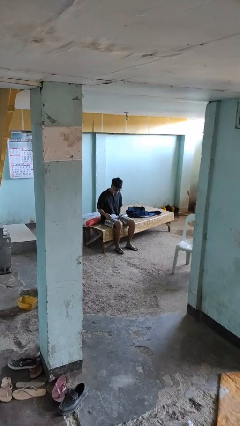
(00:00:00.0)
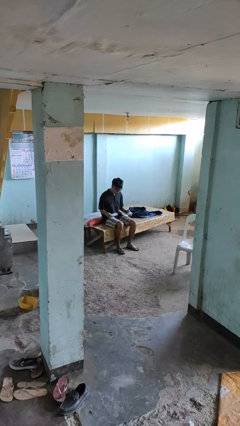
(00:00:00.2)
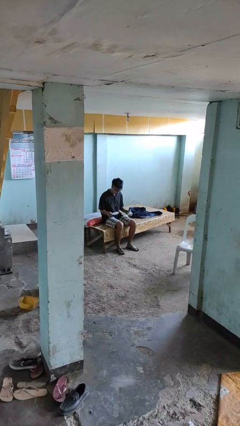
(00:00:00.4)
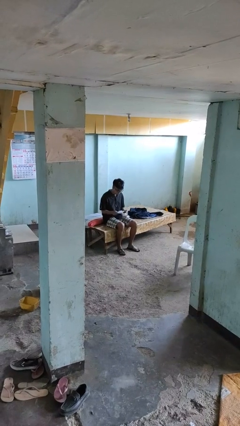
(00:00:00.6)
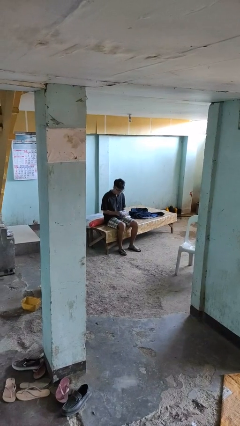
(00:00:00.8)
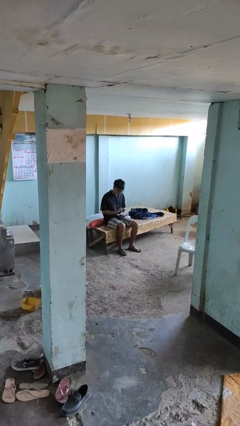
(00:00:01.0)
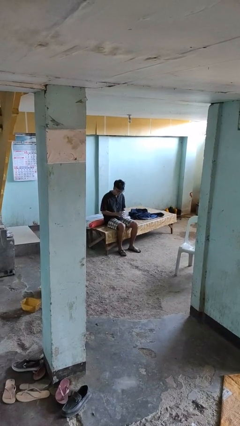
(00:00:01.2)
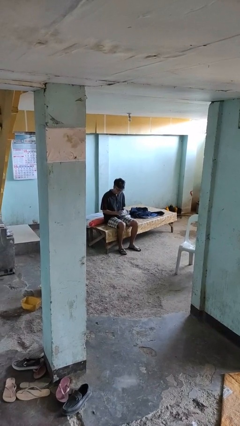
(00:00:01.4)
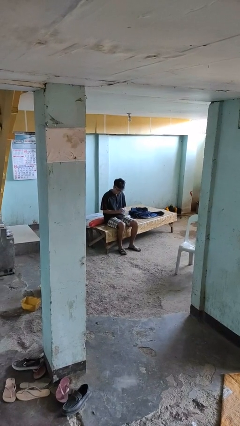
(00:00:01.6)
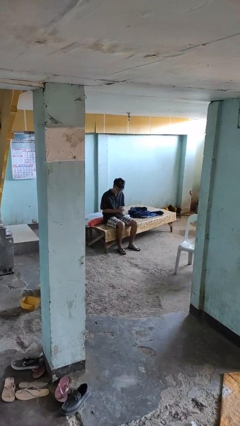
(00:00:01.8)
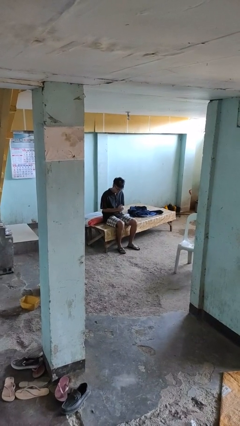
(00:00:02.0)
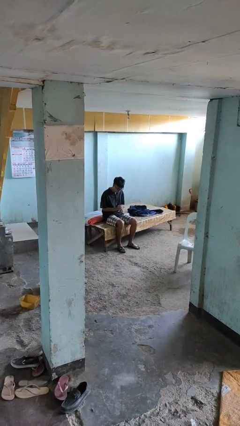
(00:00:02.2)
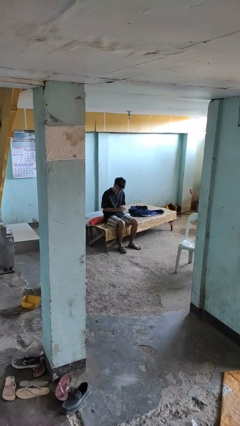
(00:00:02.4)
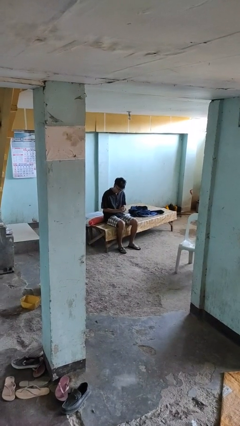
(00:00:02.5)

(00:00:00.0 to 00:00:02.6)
person crumples paper

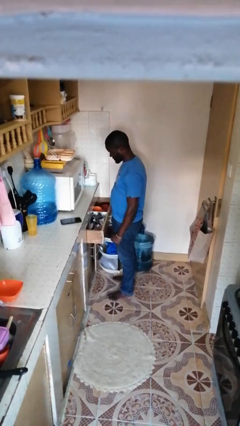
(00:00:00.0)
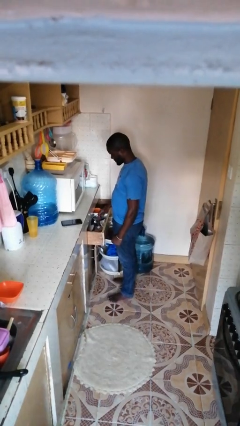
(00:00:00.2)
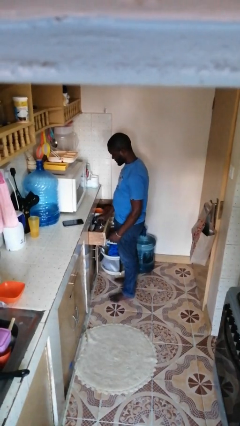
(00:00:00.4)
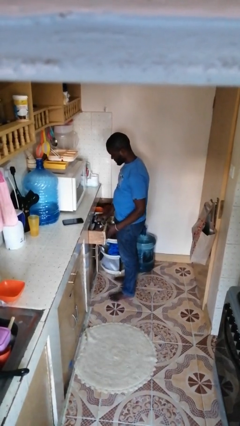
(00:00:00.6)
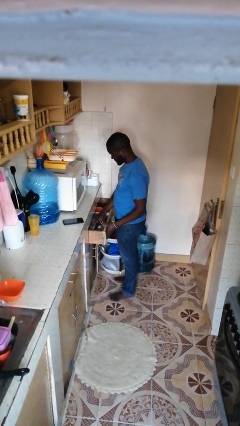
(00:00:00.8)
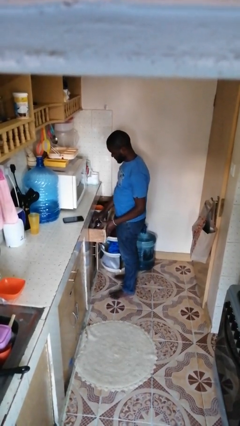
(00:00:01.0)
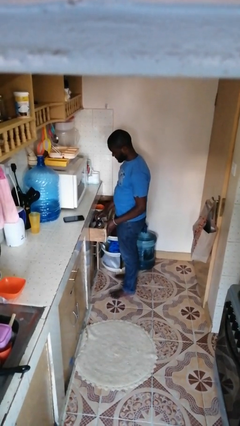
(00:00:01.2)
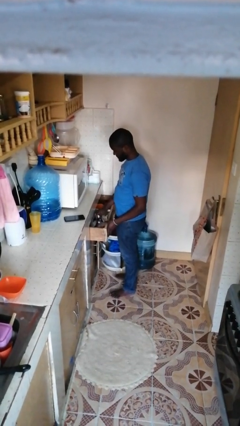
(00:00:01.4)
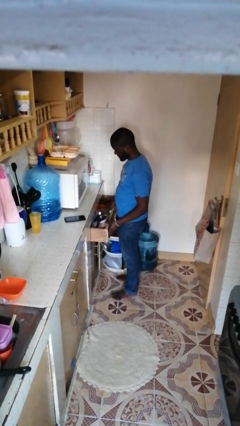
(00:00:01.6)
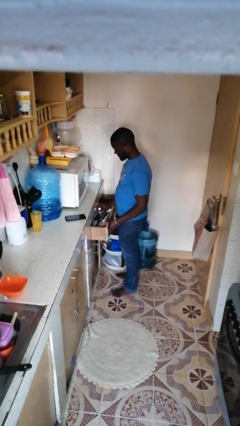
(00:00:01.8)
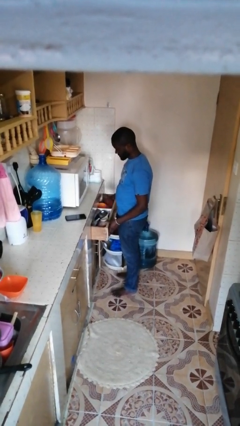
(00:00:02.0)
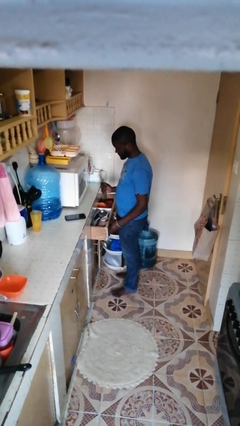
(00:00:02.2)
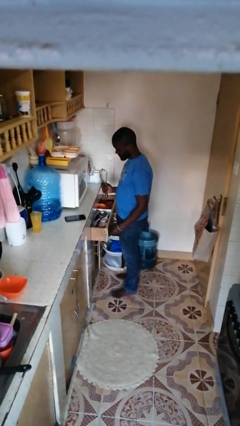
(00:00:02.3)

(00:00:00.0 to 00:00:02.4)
person takes object from kitchen drawer

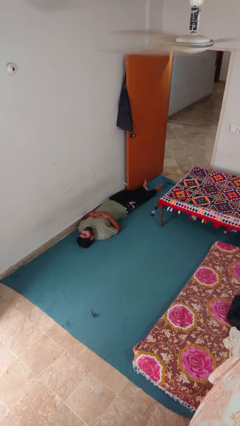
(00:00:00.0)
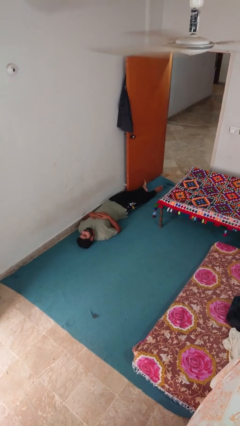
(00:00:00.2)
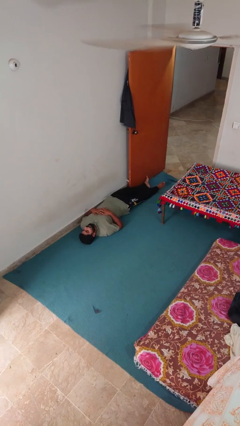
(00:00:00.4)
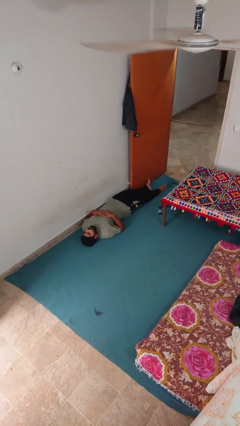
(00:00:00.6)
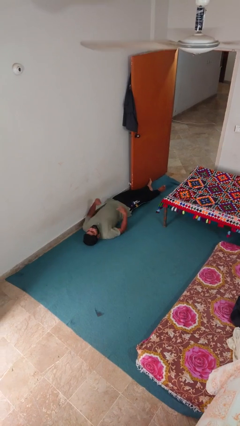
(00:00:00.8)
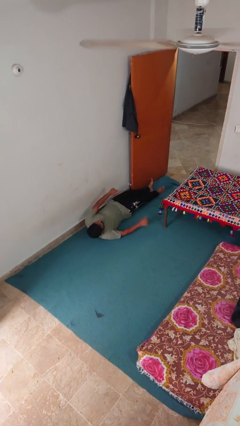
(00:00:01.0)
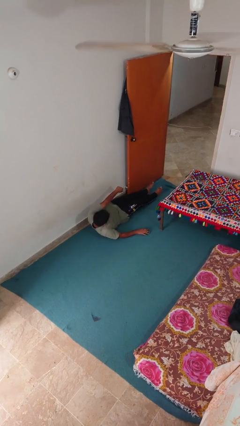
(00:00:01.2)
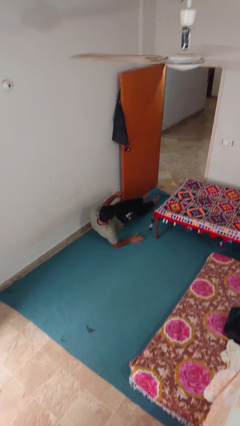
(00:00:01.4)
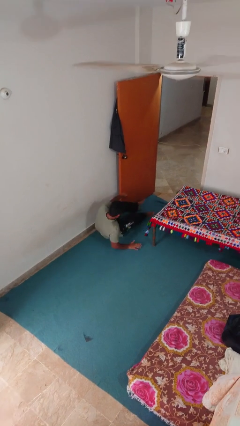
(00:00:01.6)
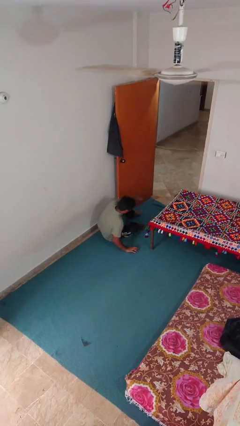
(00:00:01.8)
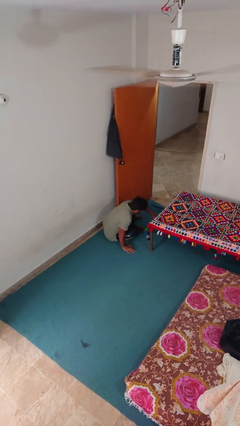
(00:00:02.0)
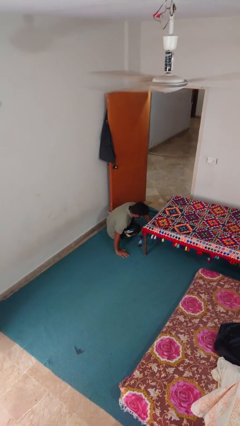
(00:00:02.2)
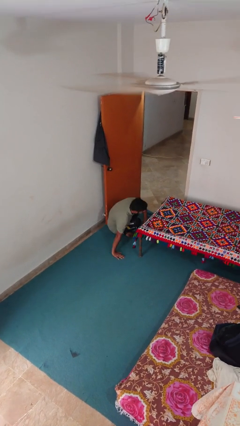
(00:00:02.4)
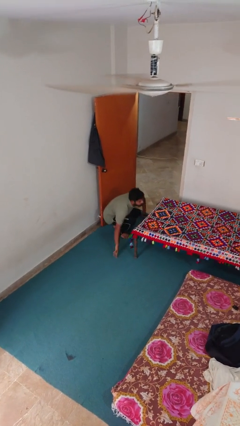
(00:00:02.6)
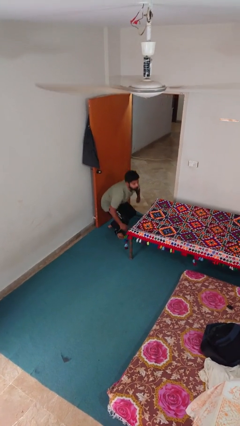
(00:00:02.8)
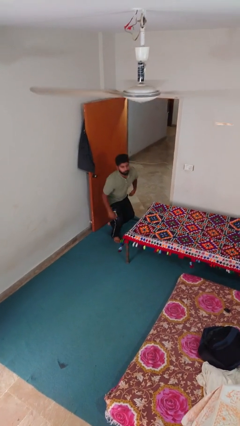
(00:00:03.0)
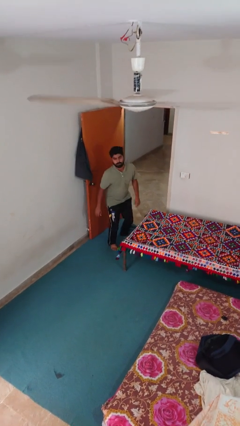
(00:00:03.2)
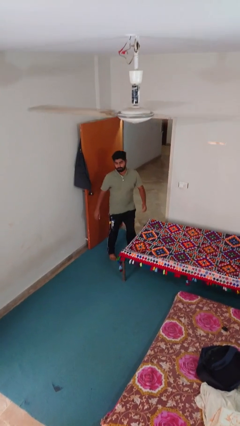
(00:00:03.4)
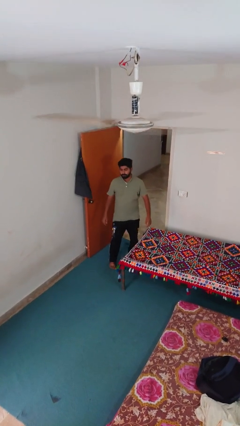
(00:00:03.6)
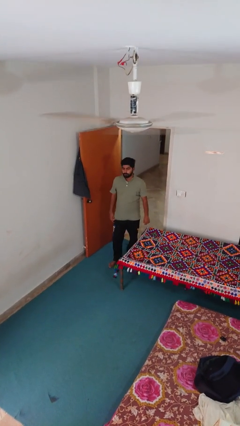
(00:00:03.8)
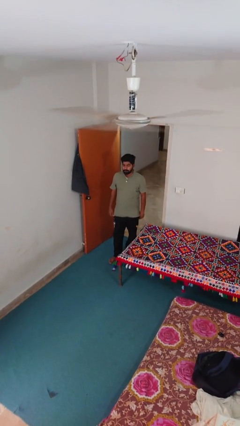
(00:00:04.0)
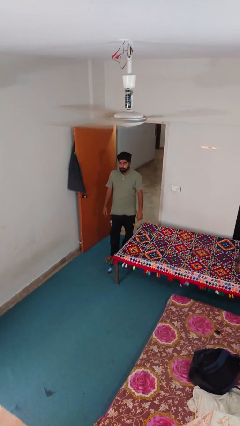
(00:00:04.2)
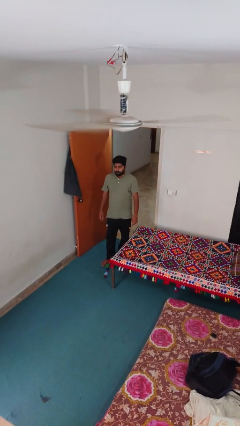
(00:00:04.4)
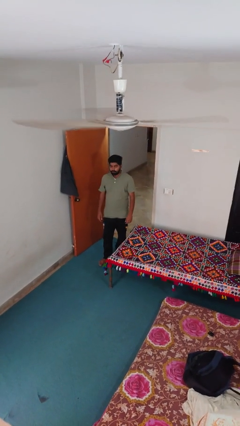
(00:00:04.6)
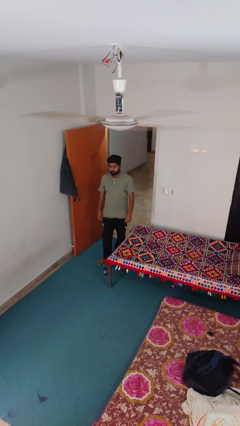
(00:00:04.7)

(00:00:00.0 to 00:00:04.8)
person stands up from floor

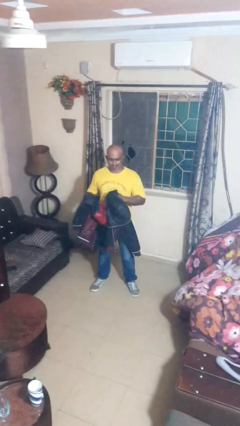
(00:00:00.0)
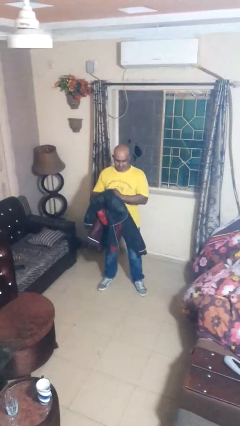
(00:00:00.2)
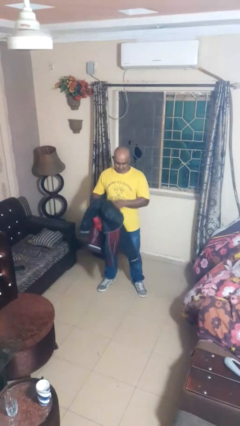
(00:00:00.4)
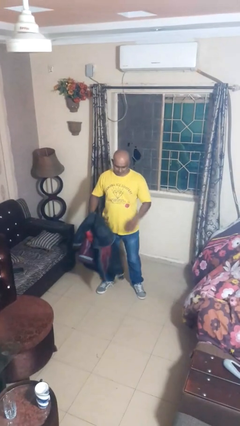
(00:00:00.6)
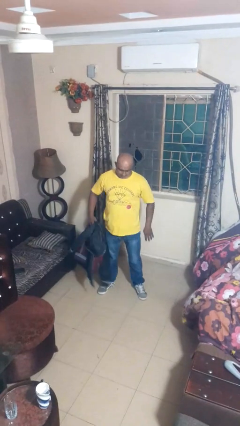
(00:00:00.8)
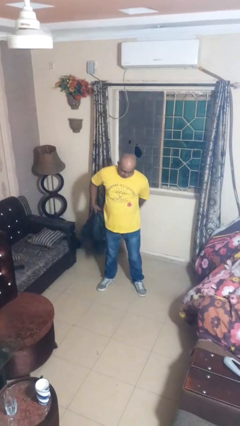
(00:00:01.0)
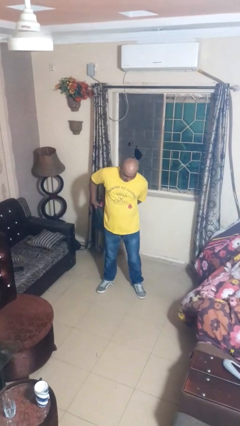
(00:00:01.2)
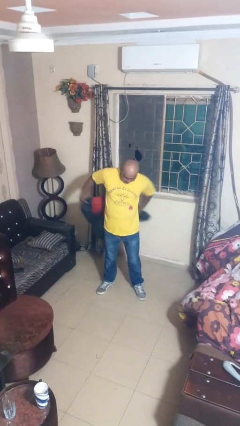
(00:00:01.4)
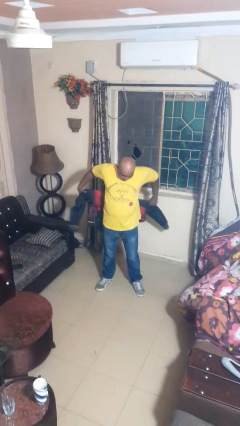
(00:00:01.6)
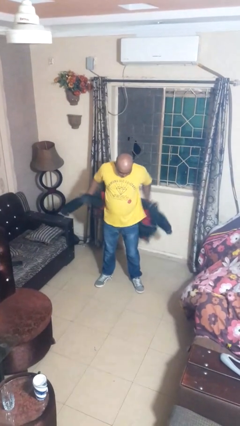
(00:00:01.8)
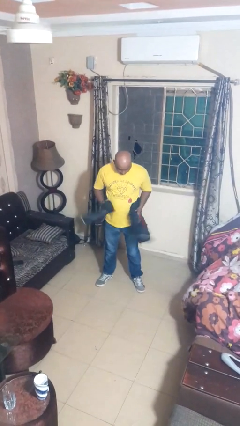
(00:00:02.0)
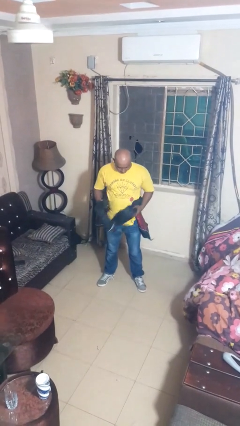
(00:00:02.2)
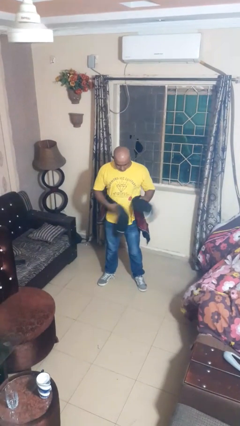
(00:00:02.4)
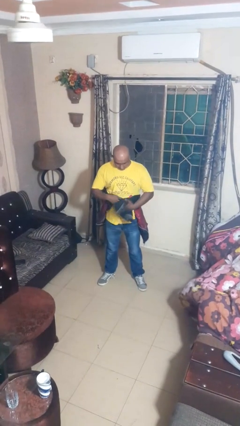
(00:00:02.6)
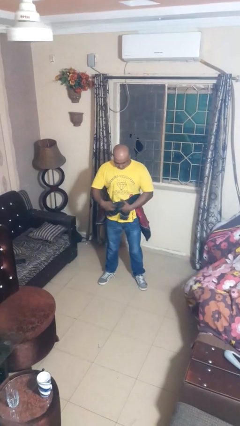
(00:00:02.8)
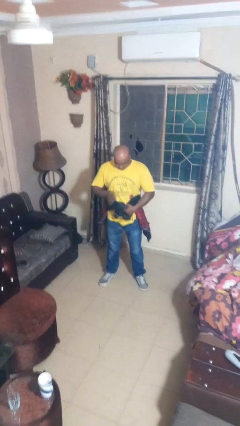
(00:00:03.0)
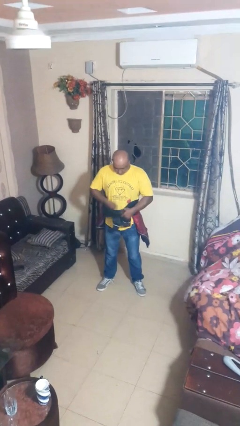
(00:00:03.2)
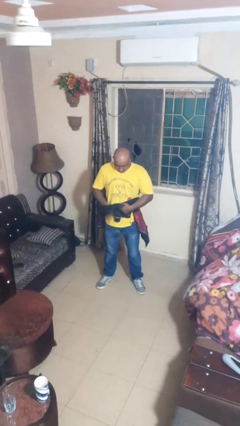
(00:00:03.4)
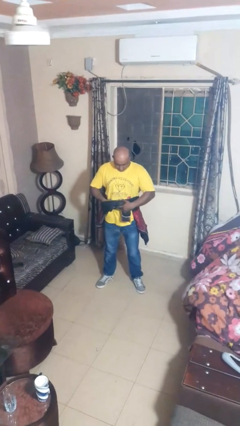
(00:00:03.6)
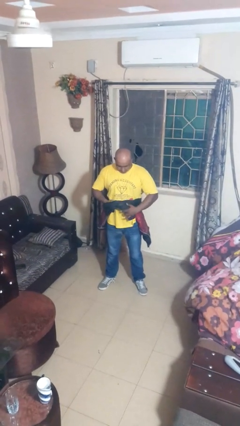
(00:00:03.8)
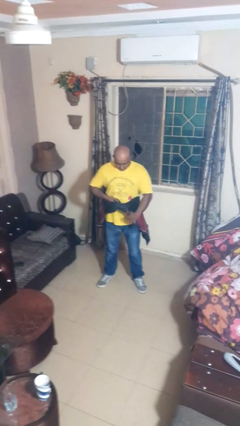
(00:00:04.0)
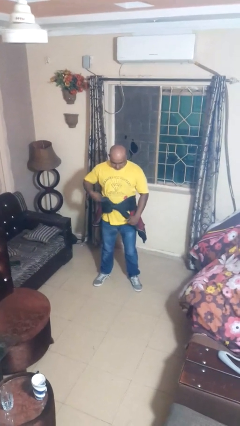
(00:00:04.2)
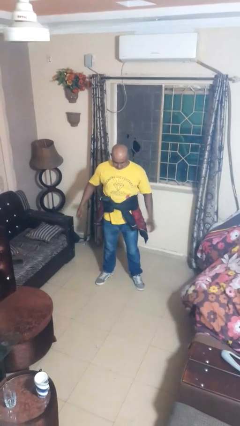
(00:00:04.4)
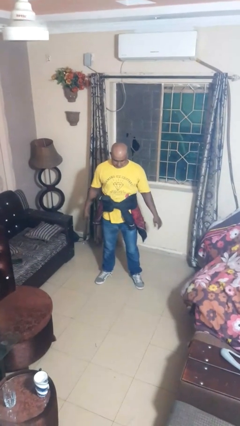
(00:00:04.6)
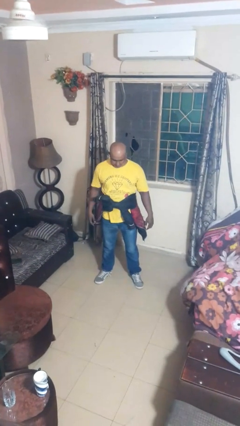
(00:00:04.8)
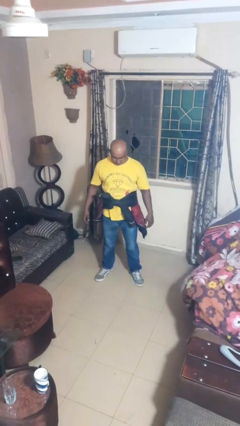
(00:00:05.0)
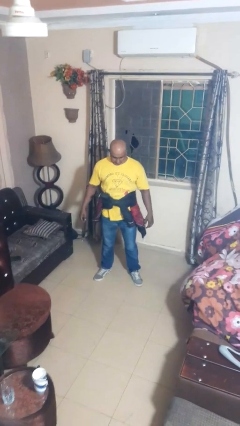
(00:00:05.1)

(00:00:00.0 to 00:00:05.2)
person ties jacket around waist

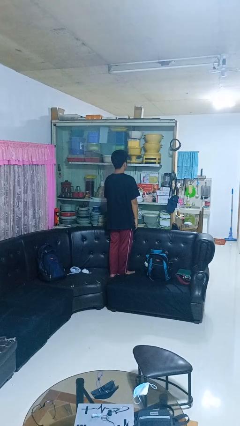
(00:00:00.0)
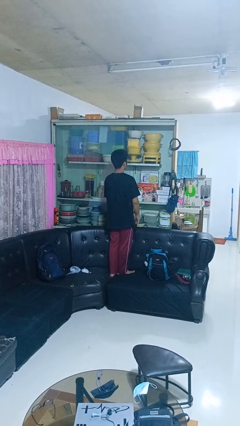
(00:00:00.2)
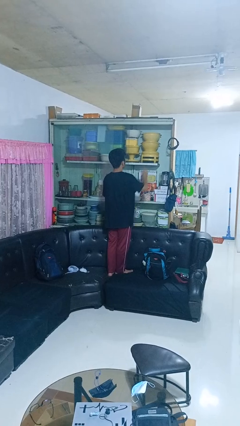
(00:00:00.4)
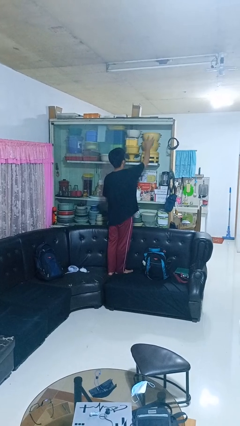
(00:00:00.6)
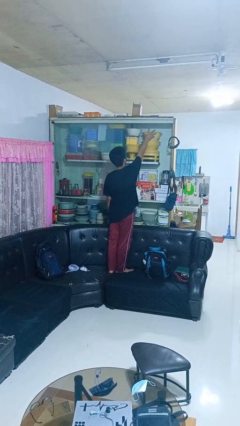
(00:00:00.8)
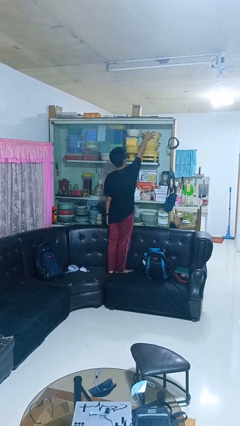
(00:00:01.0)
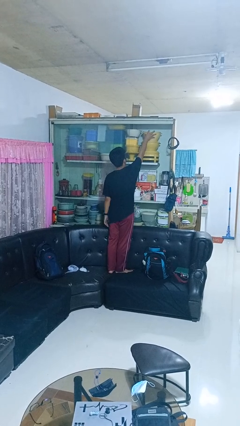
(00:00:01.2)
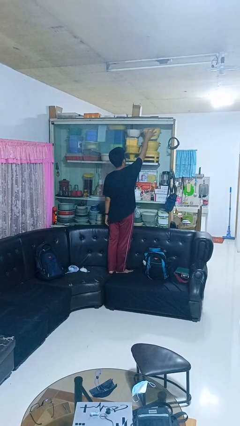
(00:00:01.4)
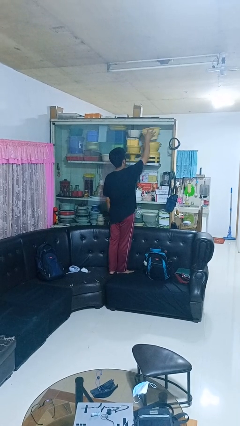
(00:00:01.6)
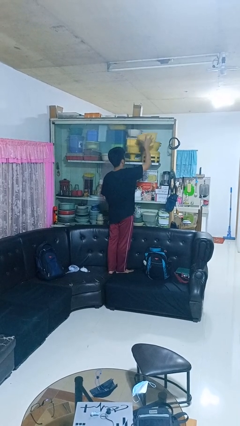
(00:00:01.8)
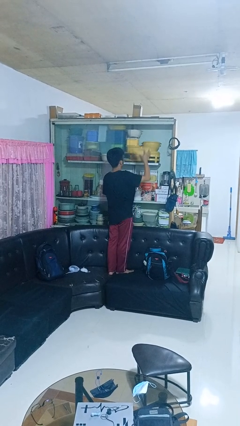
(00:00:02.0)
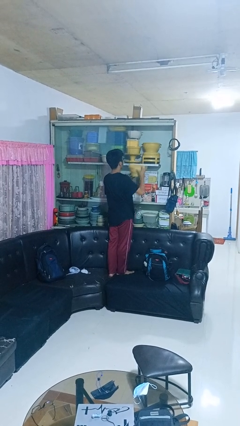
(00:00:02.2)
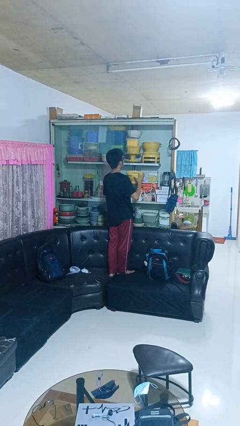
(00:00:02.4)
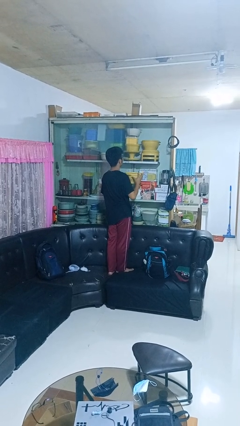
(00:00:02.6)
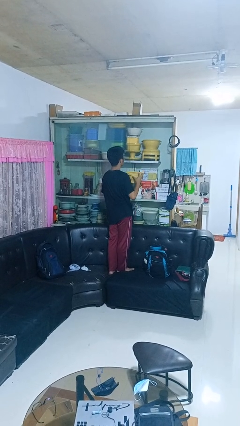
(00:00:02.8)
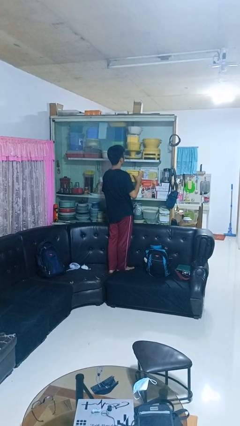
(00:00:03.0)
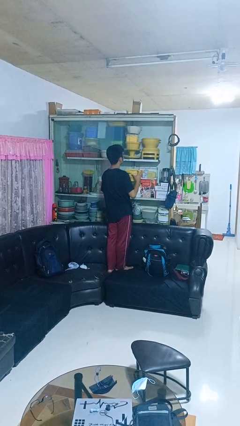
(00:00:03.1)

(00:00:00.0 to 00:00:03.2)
person picks up object from cabinet
